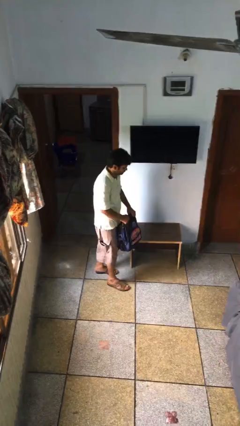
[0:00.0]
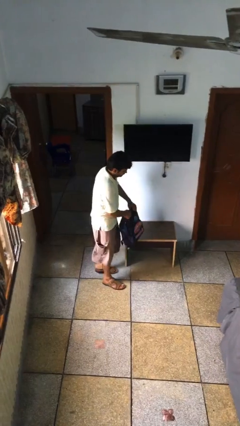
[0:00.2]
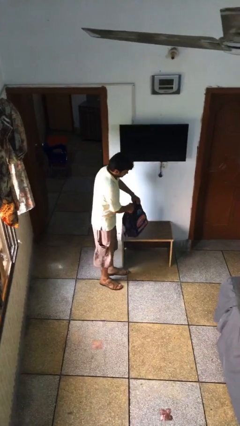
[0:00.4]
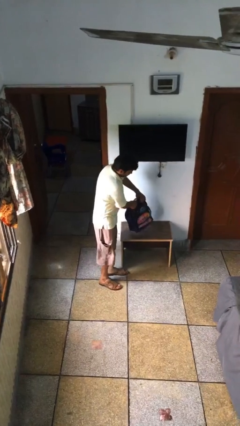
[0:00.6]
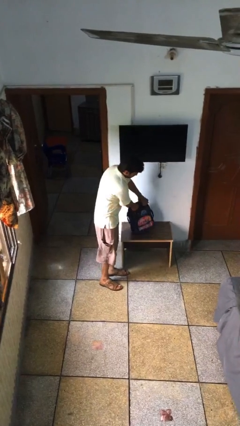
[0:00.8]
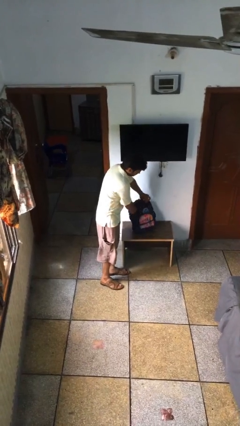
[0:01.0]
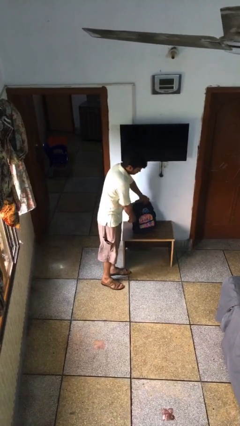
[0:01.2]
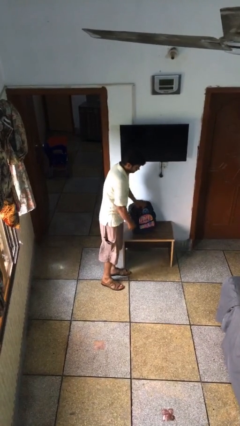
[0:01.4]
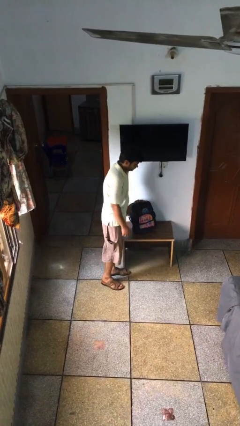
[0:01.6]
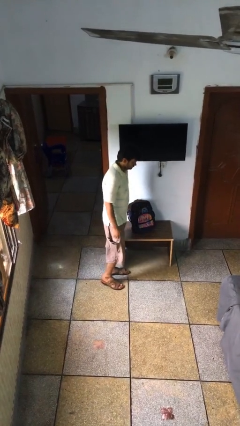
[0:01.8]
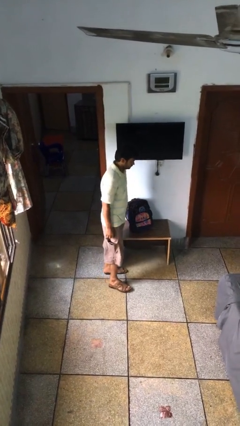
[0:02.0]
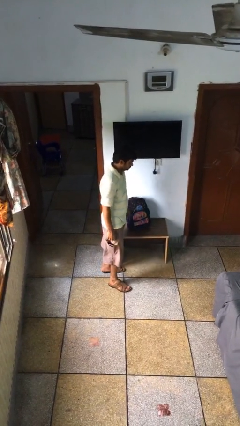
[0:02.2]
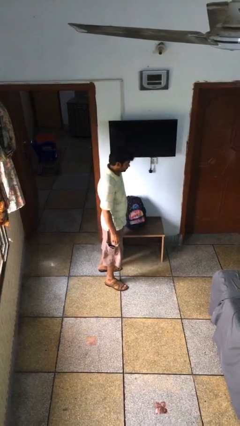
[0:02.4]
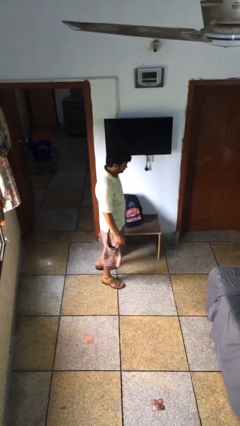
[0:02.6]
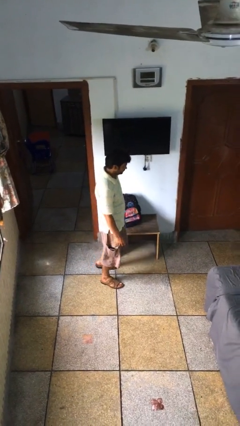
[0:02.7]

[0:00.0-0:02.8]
person puts down object on table

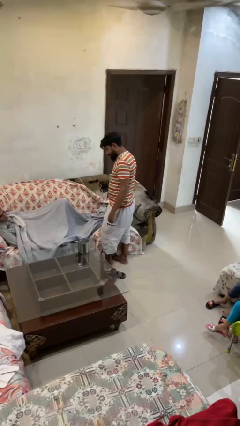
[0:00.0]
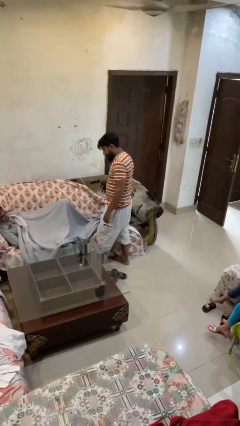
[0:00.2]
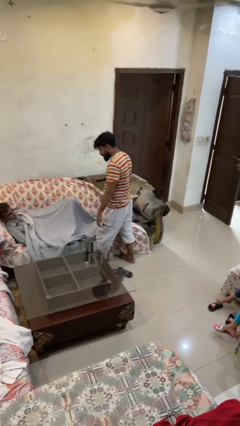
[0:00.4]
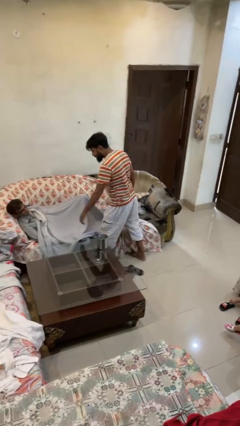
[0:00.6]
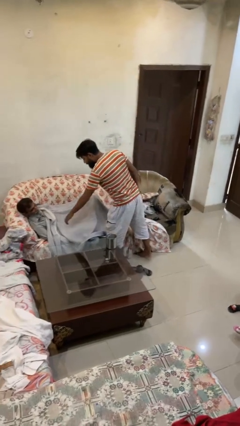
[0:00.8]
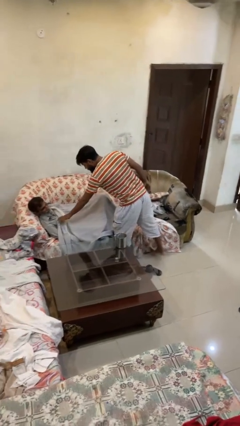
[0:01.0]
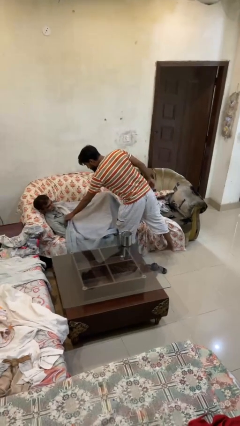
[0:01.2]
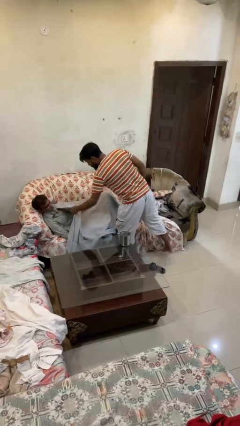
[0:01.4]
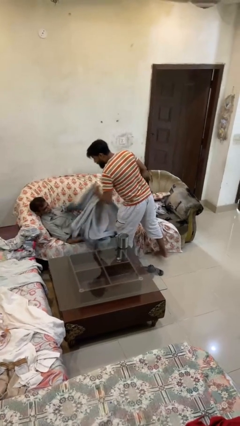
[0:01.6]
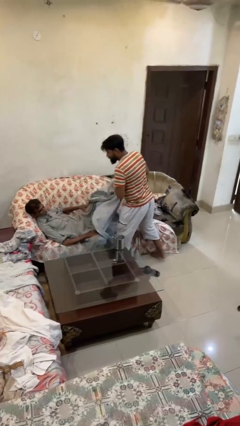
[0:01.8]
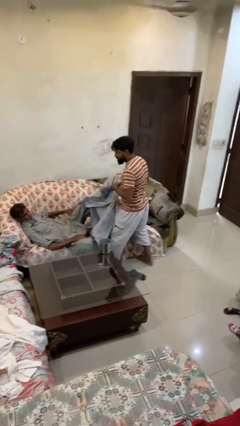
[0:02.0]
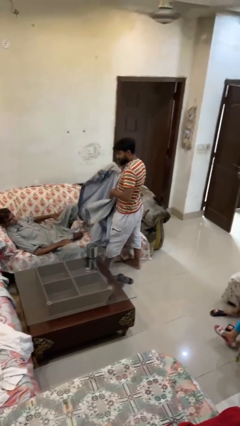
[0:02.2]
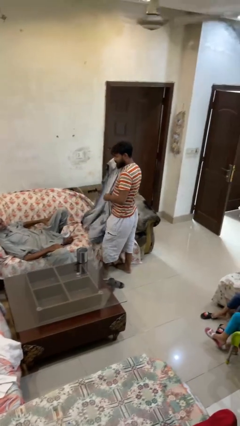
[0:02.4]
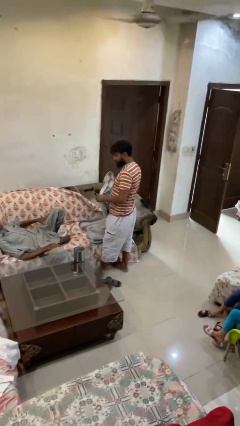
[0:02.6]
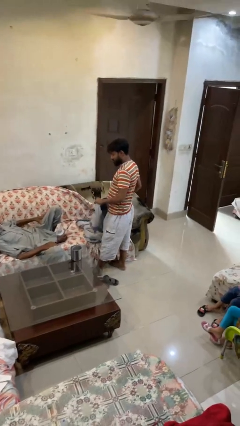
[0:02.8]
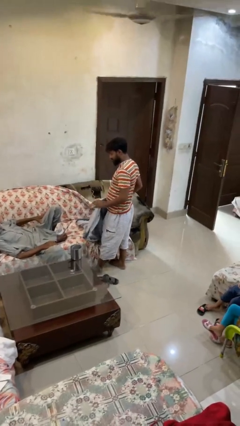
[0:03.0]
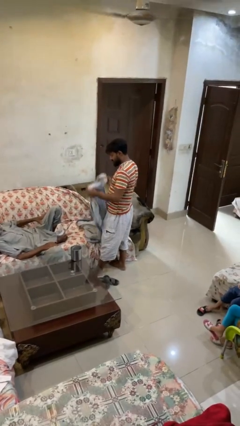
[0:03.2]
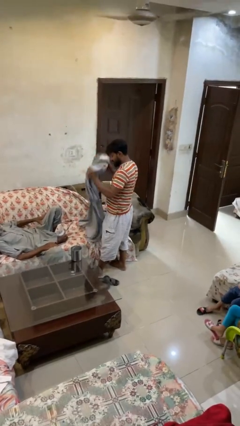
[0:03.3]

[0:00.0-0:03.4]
person uncovers friend with blanket

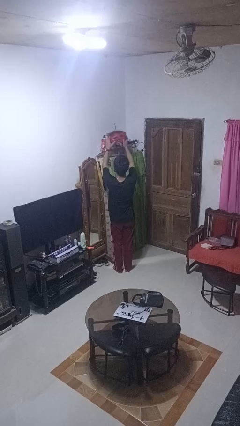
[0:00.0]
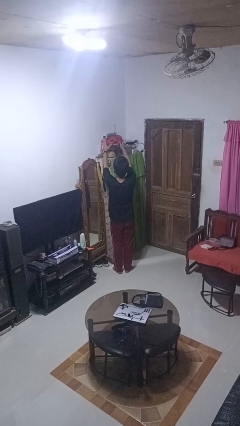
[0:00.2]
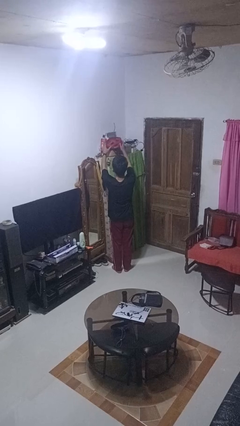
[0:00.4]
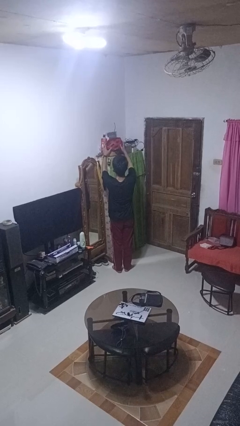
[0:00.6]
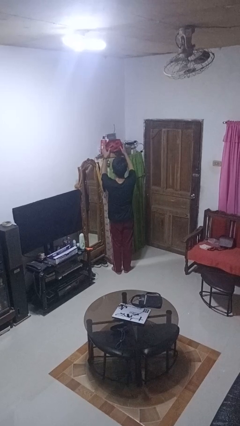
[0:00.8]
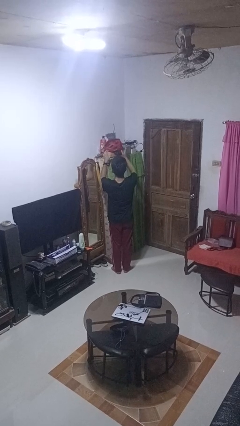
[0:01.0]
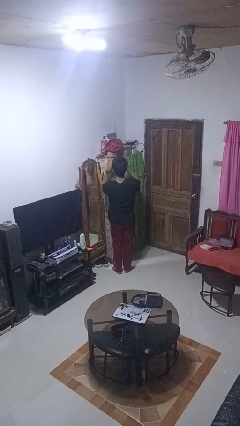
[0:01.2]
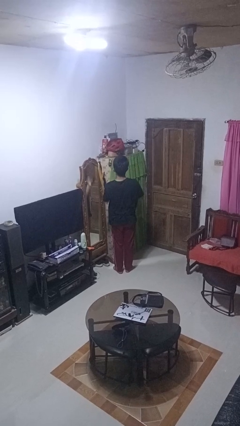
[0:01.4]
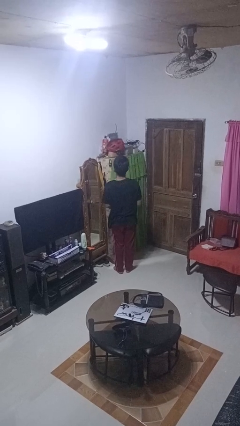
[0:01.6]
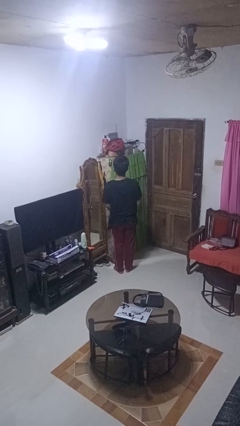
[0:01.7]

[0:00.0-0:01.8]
person puts down object on shelf

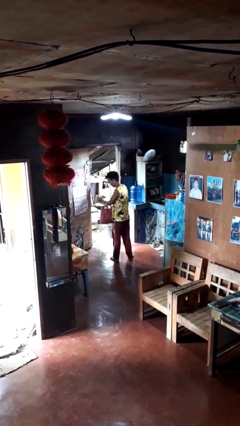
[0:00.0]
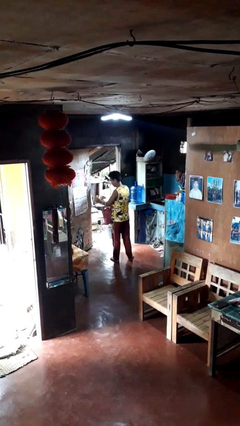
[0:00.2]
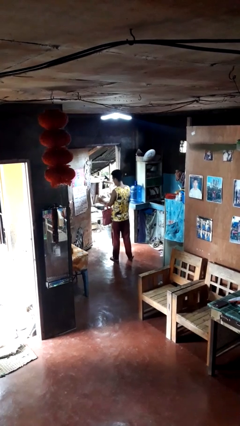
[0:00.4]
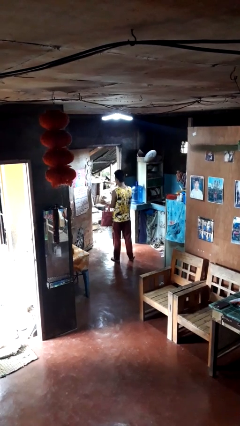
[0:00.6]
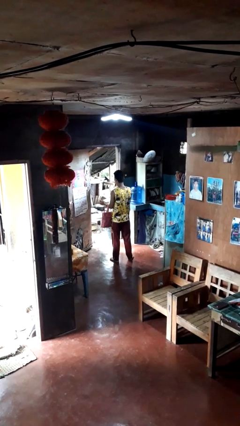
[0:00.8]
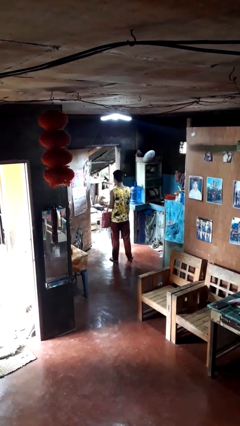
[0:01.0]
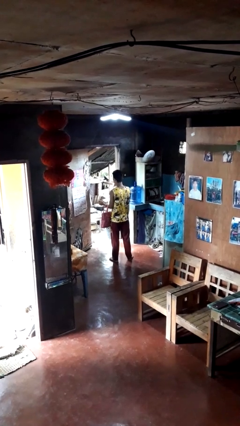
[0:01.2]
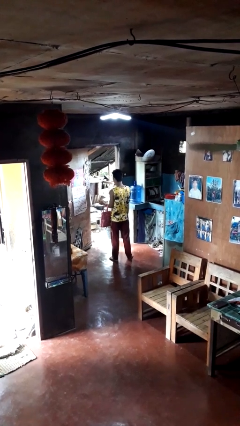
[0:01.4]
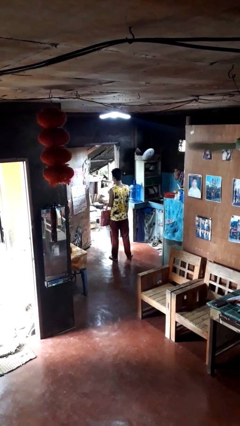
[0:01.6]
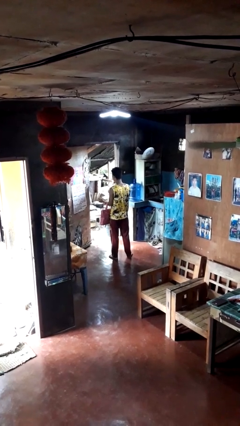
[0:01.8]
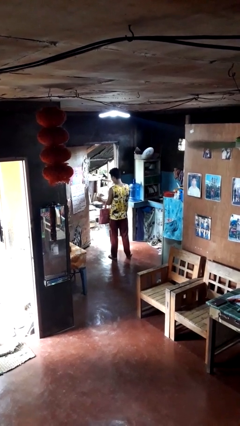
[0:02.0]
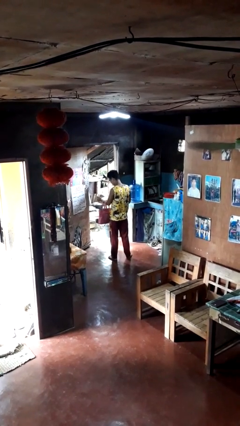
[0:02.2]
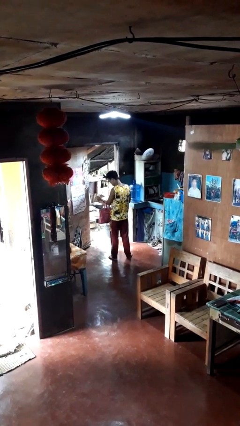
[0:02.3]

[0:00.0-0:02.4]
person takes object from purse

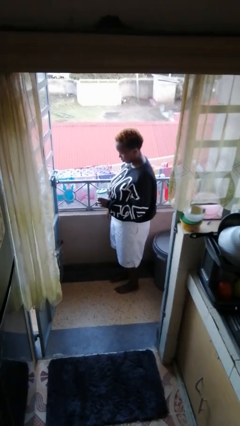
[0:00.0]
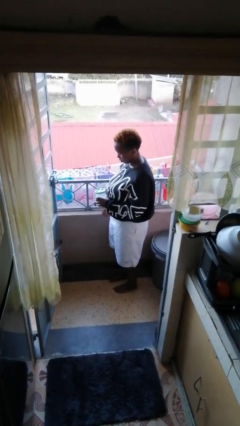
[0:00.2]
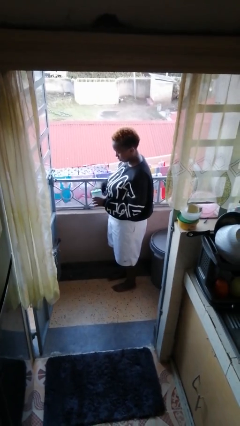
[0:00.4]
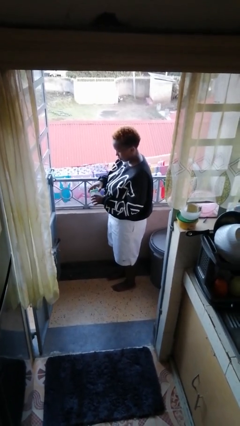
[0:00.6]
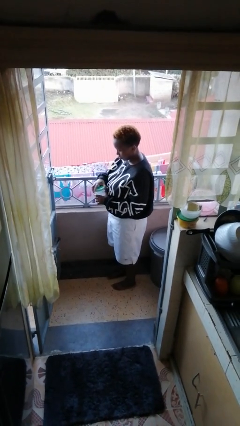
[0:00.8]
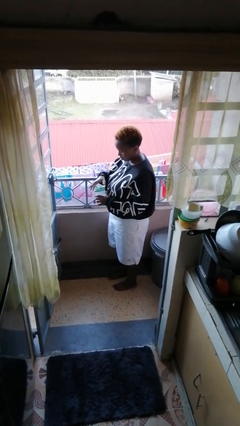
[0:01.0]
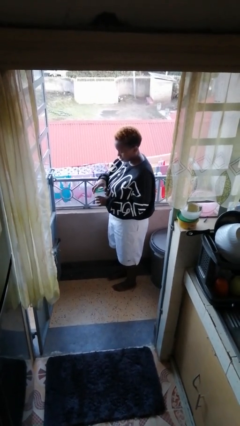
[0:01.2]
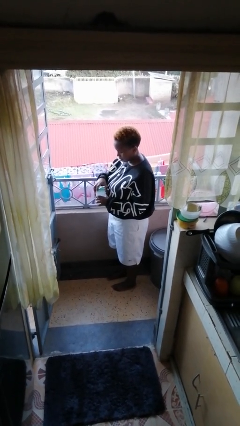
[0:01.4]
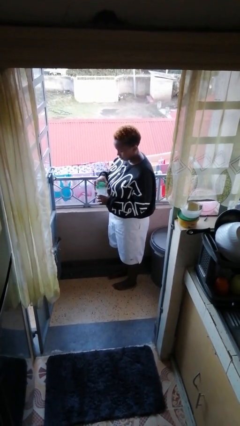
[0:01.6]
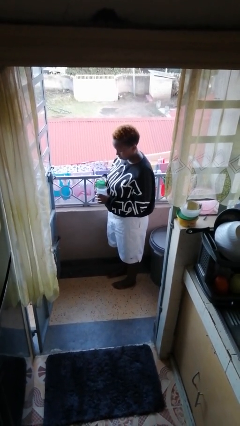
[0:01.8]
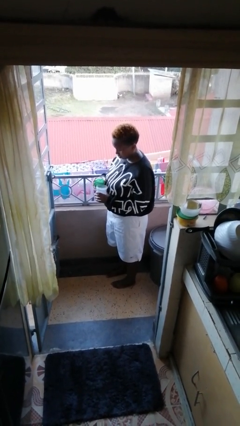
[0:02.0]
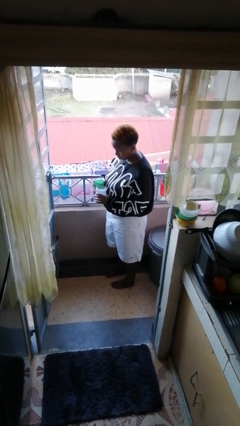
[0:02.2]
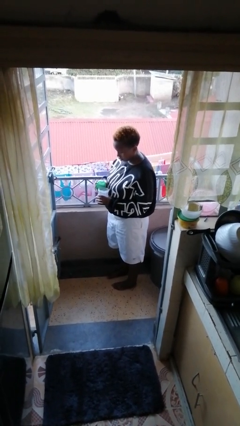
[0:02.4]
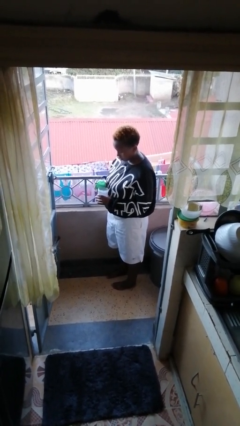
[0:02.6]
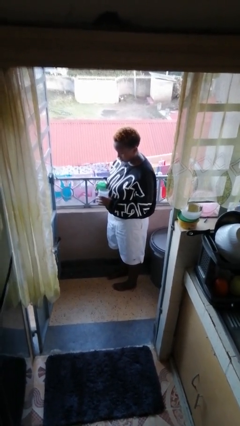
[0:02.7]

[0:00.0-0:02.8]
person opens jar

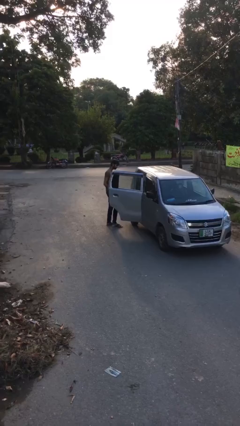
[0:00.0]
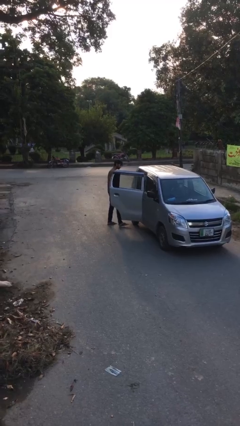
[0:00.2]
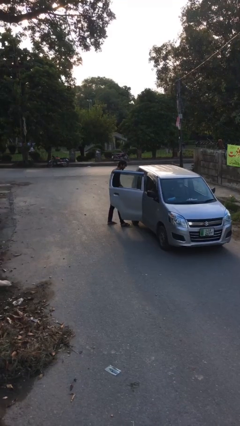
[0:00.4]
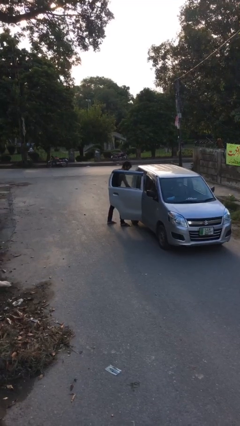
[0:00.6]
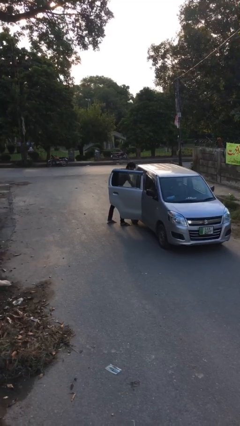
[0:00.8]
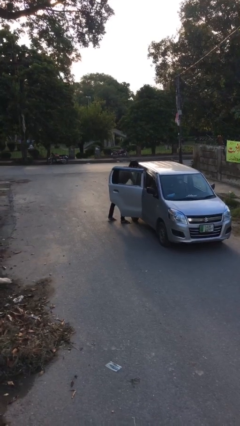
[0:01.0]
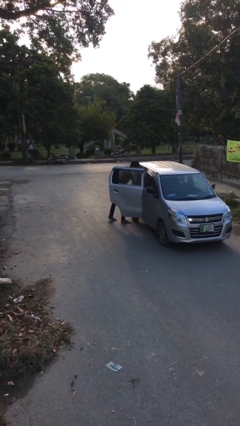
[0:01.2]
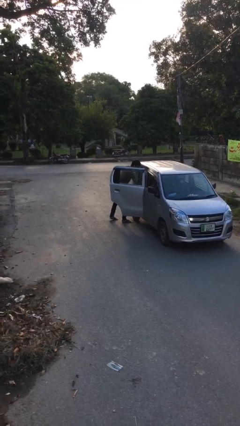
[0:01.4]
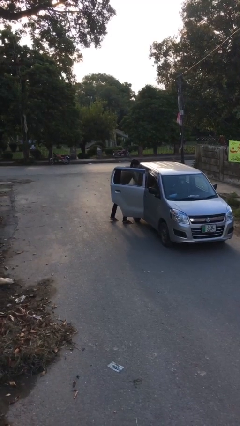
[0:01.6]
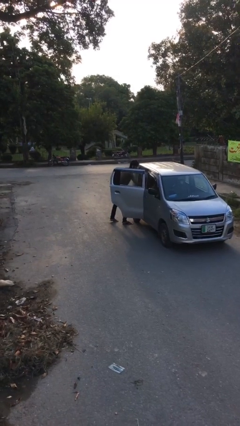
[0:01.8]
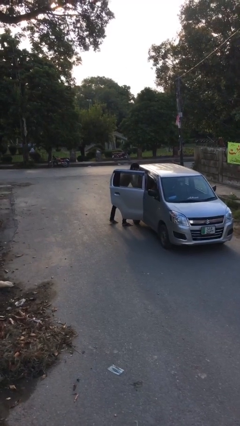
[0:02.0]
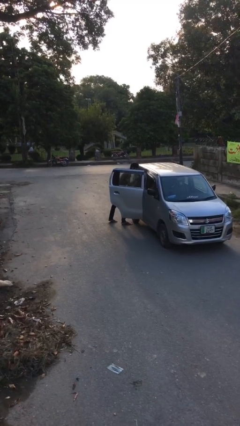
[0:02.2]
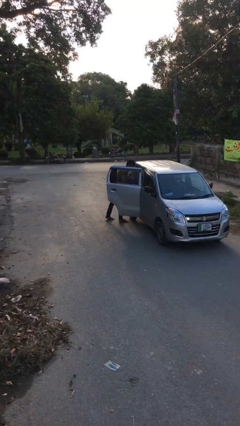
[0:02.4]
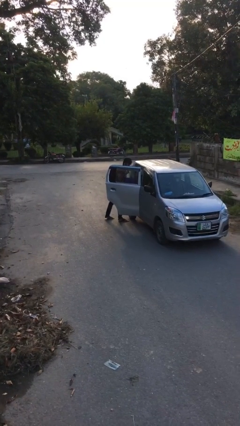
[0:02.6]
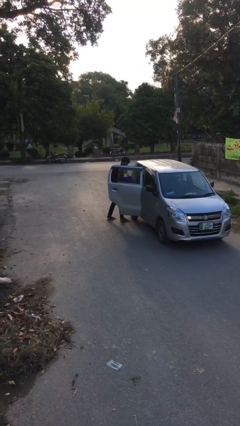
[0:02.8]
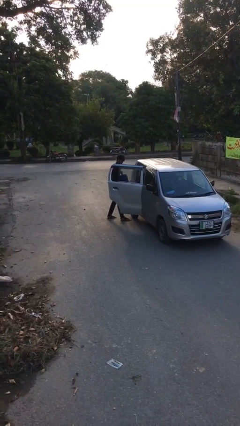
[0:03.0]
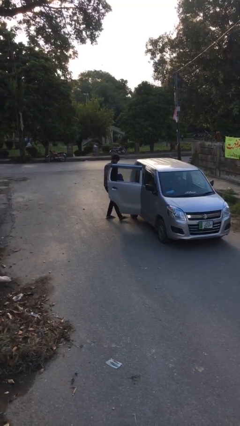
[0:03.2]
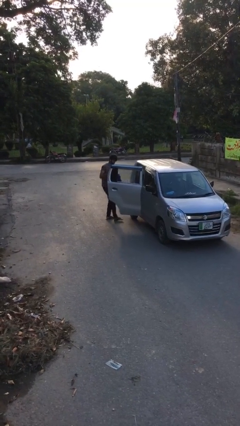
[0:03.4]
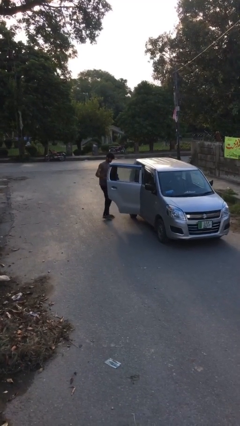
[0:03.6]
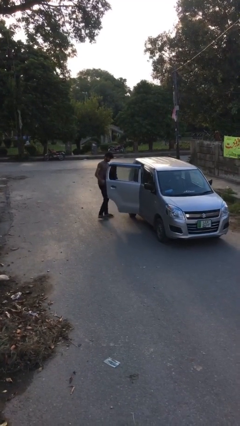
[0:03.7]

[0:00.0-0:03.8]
person unloads car

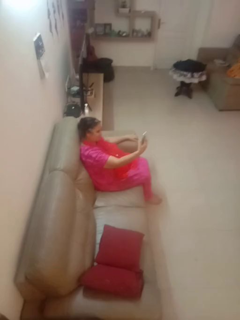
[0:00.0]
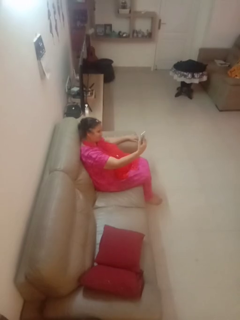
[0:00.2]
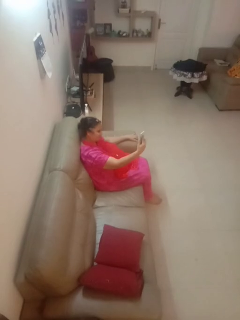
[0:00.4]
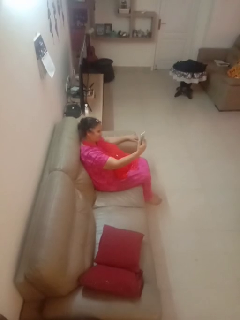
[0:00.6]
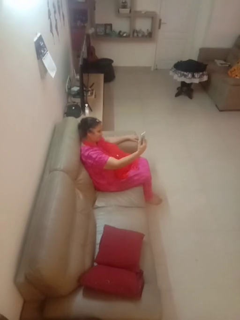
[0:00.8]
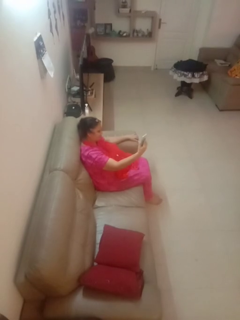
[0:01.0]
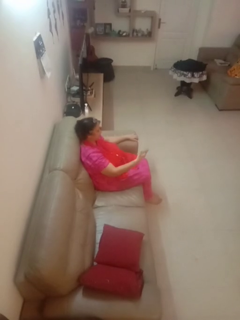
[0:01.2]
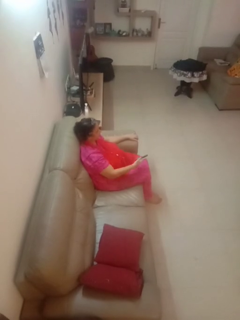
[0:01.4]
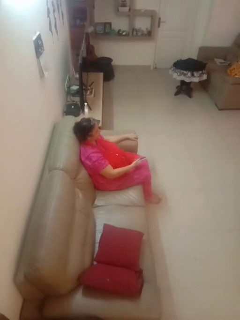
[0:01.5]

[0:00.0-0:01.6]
person takes selfie
